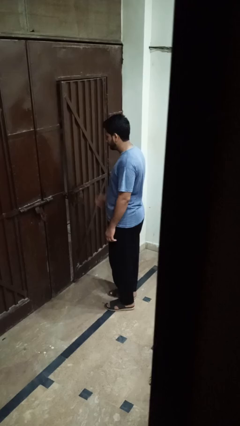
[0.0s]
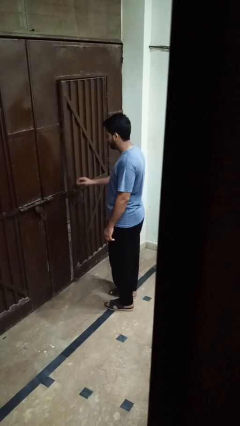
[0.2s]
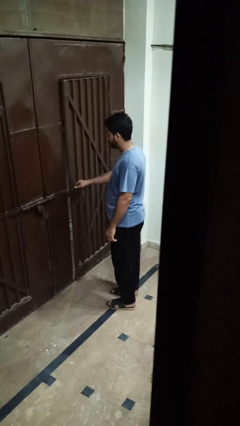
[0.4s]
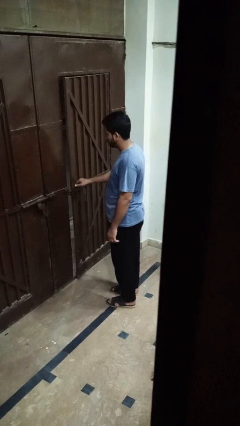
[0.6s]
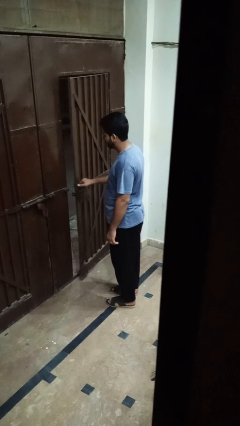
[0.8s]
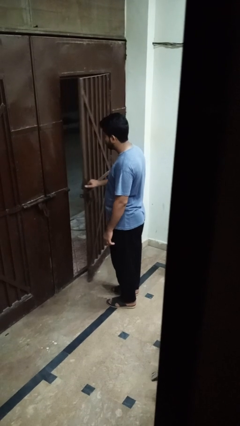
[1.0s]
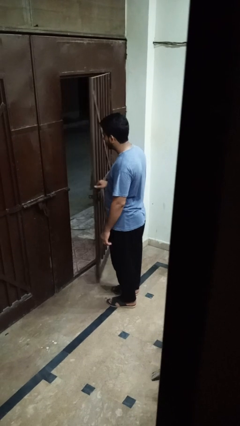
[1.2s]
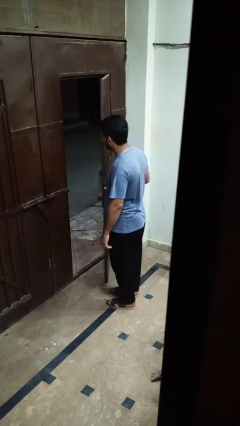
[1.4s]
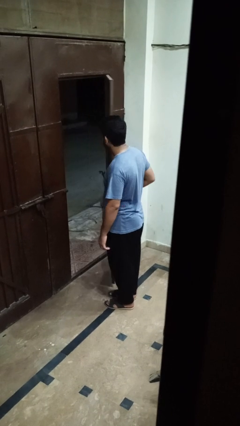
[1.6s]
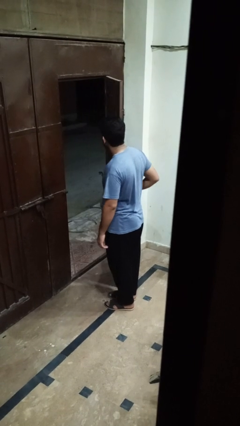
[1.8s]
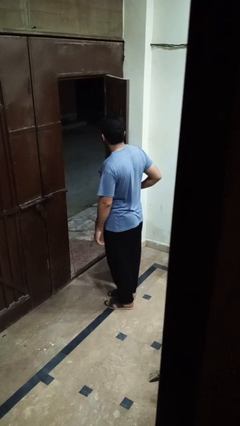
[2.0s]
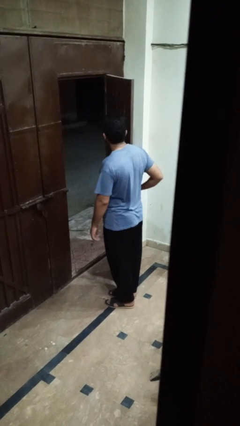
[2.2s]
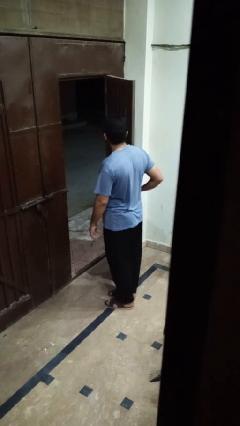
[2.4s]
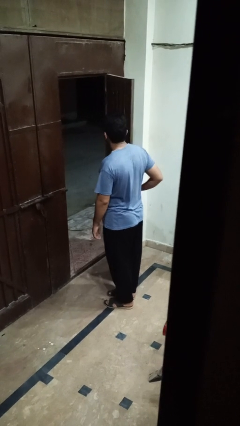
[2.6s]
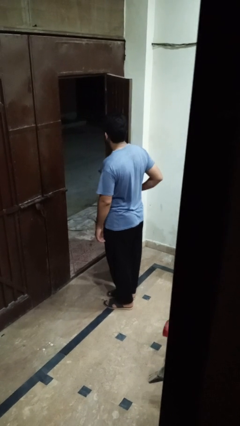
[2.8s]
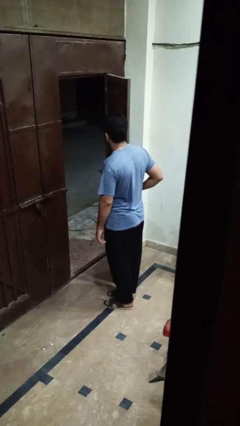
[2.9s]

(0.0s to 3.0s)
person opens gate

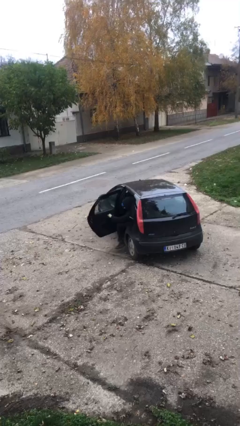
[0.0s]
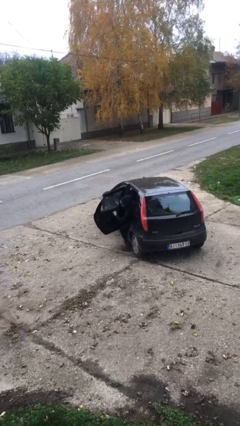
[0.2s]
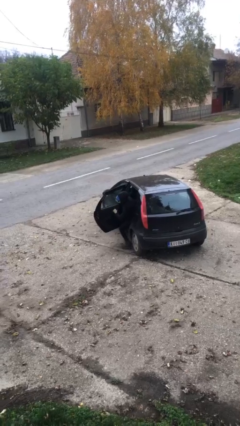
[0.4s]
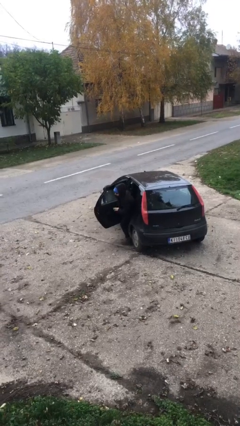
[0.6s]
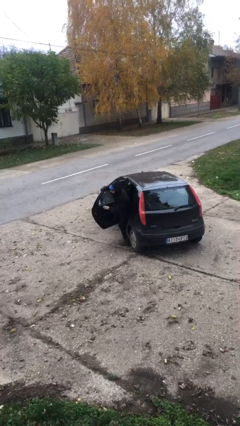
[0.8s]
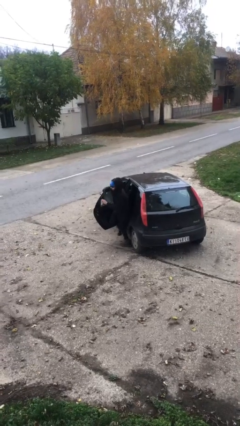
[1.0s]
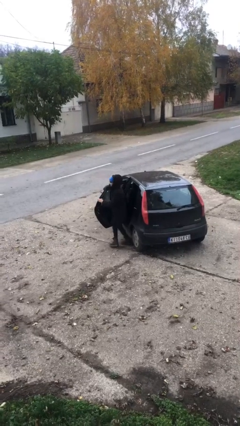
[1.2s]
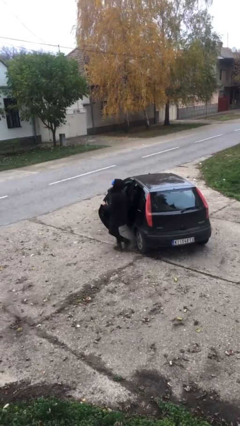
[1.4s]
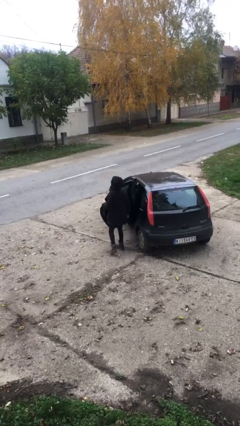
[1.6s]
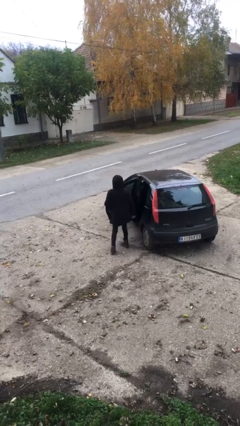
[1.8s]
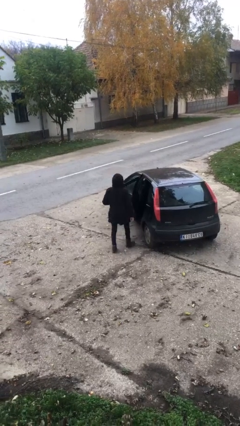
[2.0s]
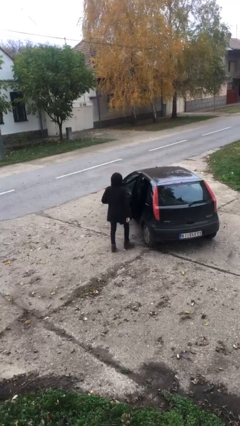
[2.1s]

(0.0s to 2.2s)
person exits car

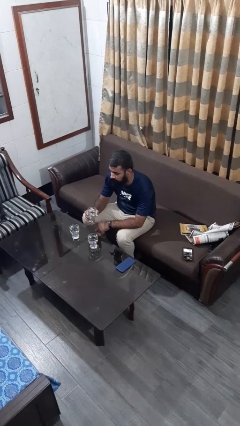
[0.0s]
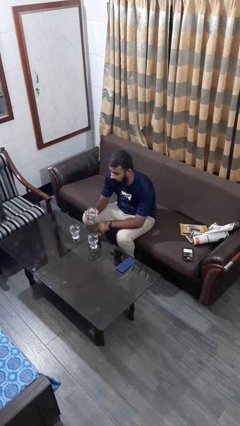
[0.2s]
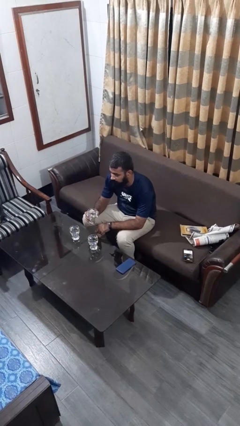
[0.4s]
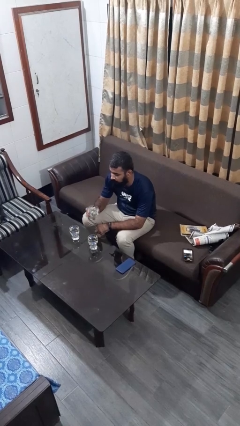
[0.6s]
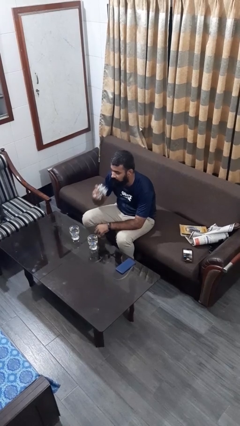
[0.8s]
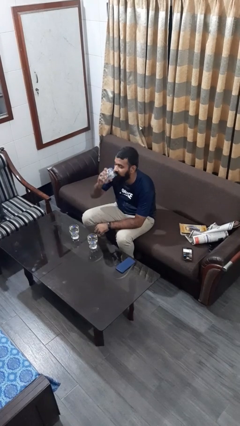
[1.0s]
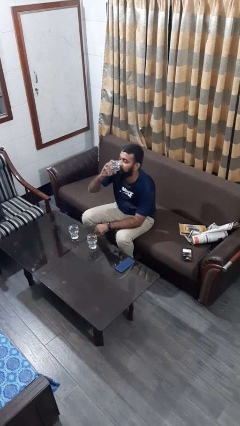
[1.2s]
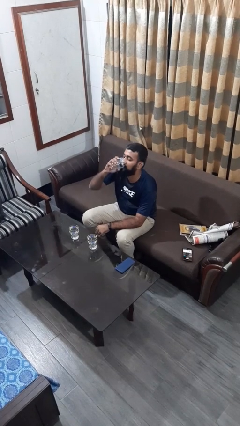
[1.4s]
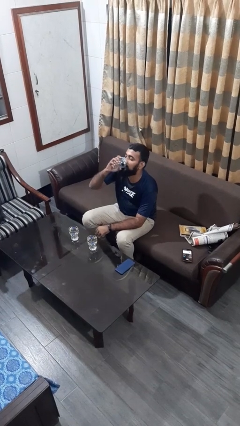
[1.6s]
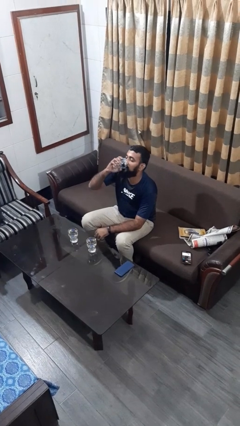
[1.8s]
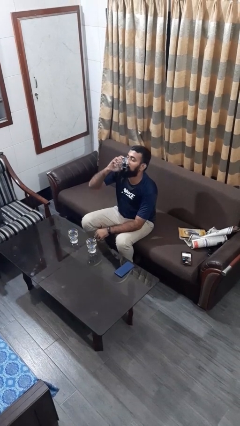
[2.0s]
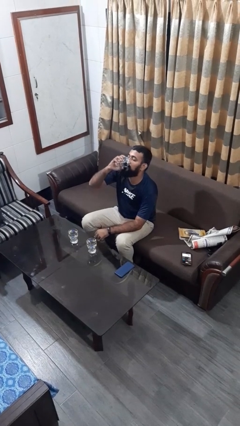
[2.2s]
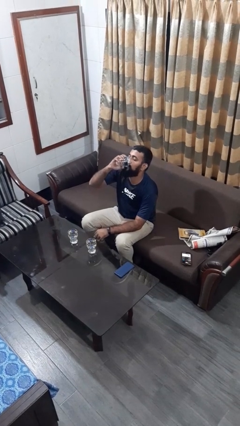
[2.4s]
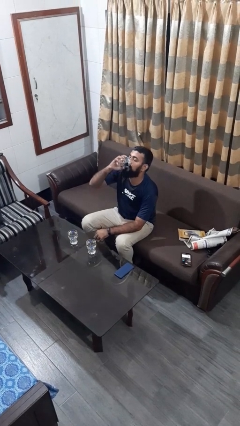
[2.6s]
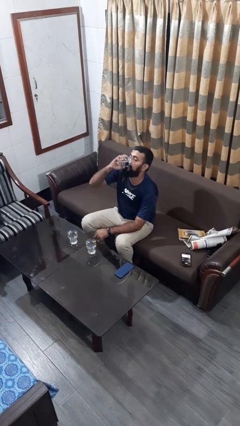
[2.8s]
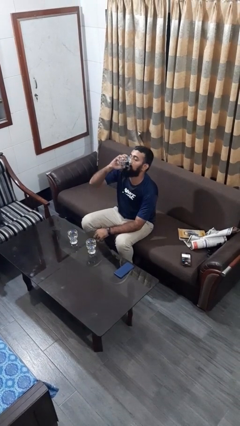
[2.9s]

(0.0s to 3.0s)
person drinks from shotglass

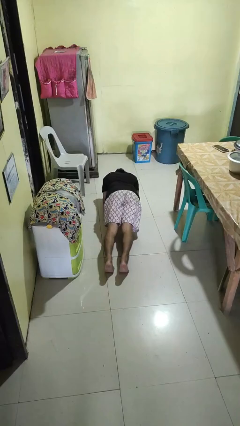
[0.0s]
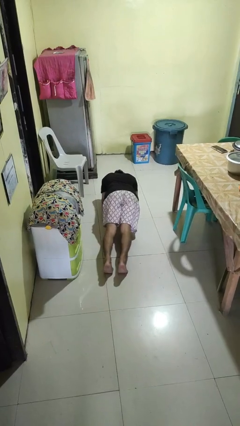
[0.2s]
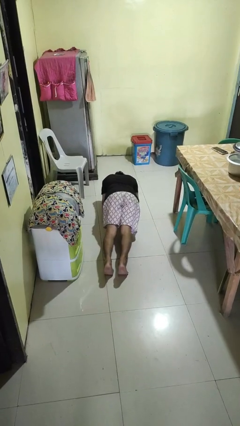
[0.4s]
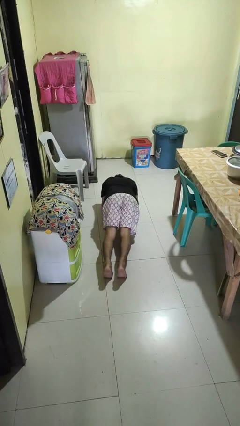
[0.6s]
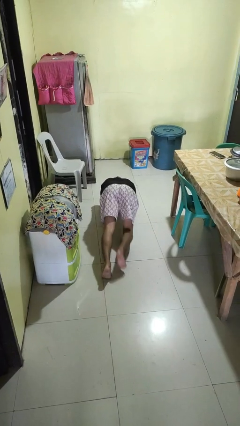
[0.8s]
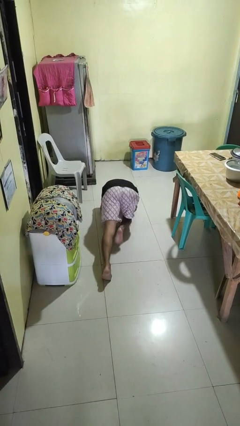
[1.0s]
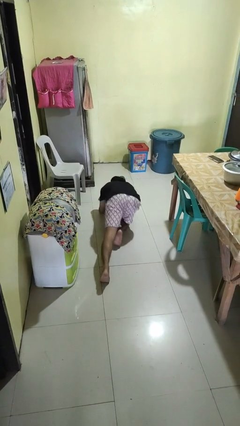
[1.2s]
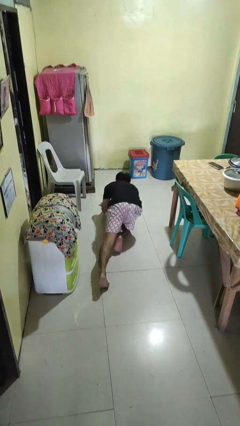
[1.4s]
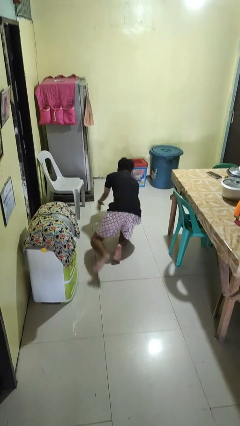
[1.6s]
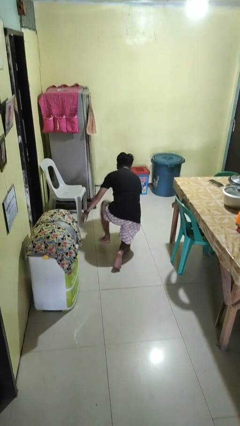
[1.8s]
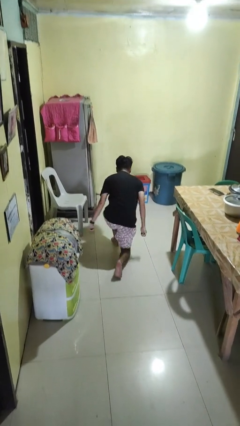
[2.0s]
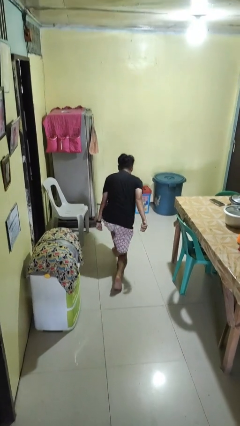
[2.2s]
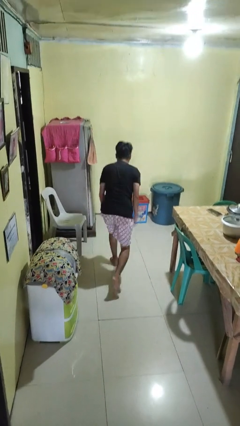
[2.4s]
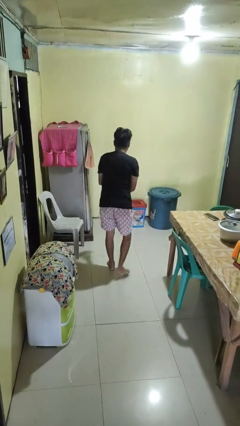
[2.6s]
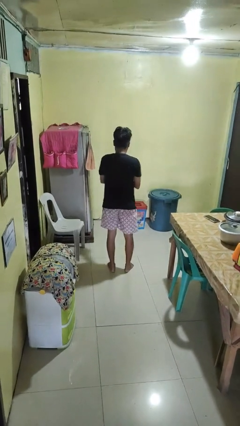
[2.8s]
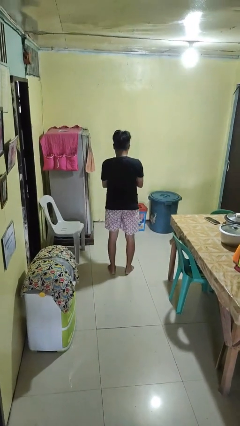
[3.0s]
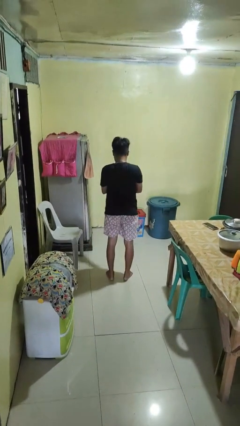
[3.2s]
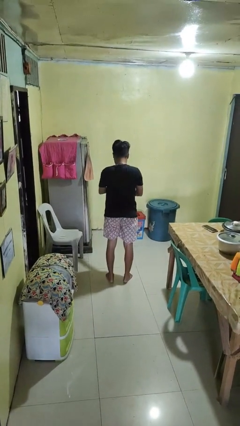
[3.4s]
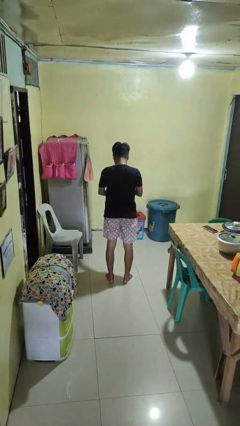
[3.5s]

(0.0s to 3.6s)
person stands up from floor

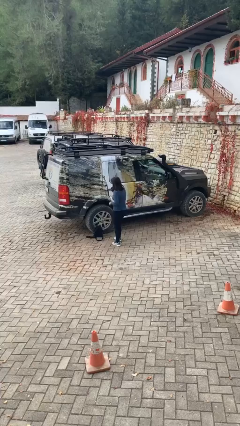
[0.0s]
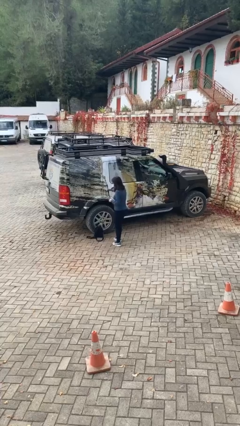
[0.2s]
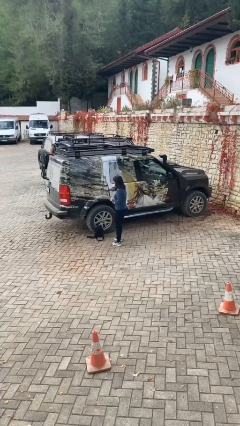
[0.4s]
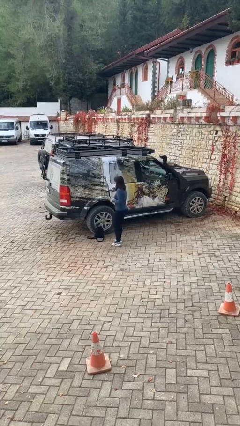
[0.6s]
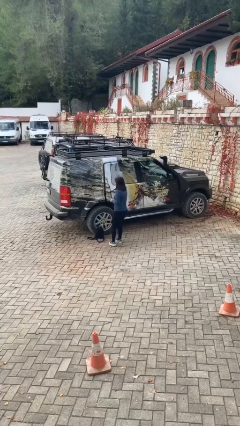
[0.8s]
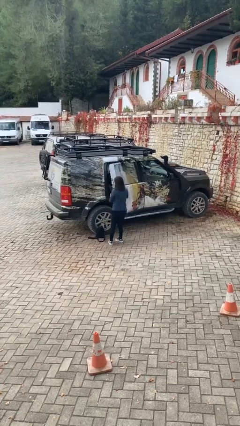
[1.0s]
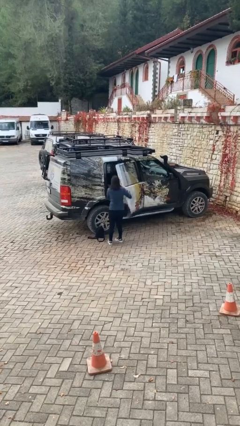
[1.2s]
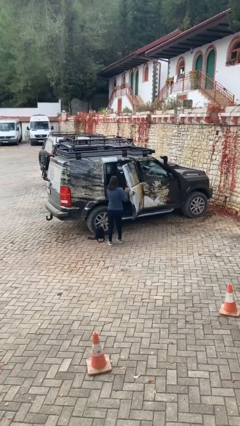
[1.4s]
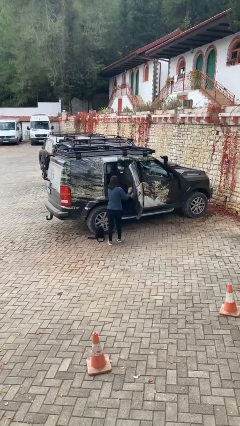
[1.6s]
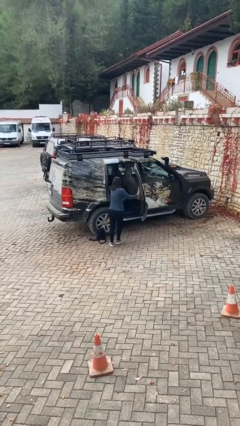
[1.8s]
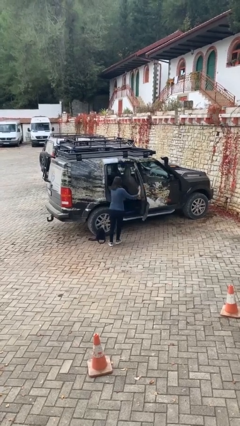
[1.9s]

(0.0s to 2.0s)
person opens car door

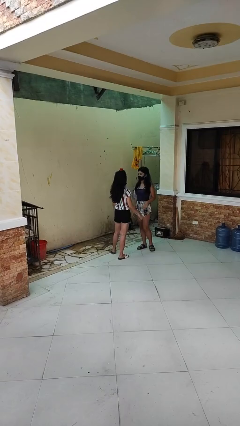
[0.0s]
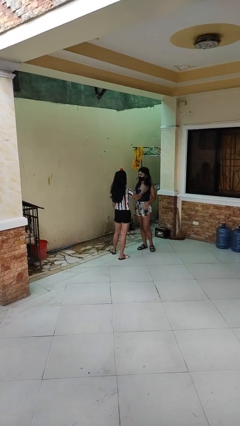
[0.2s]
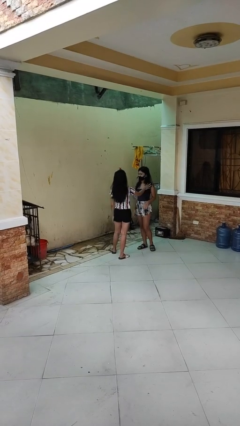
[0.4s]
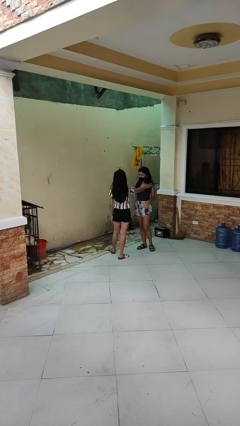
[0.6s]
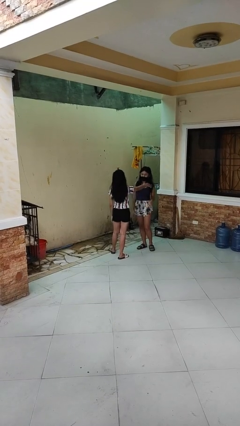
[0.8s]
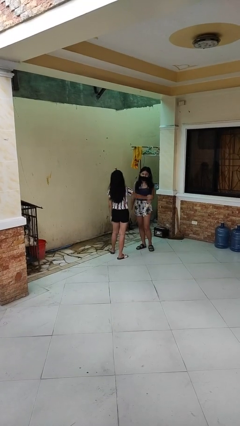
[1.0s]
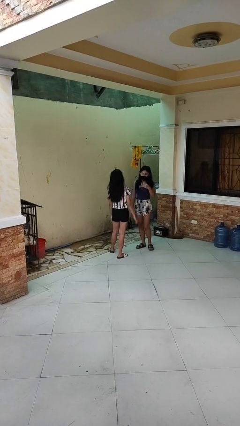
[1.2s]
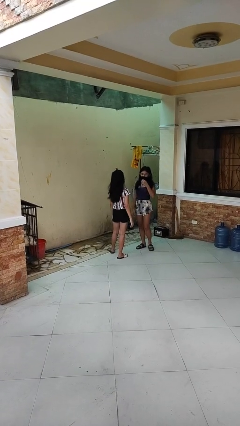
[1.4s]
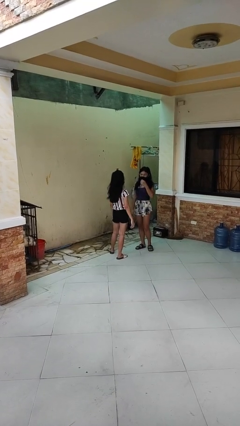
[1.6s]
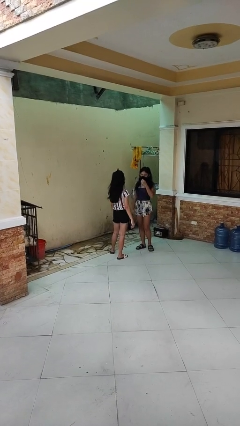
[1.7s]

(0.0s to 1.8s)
person shoves person

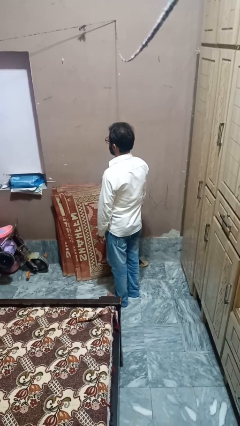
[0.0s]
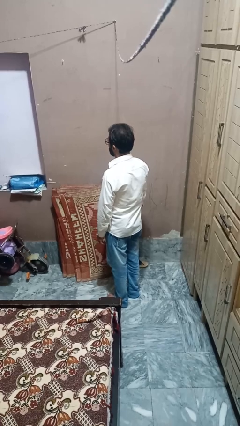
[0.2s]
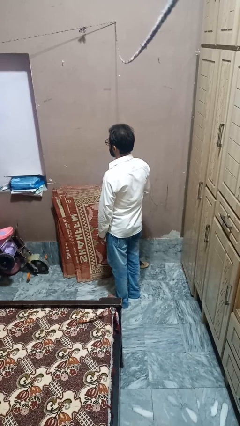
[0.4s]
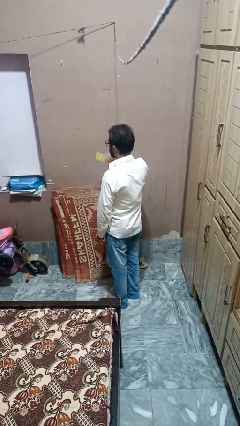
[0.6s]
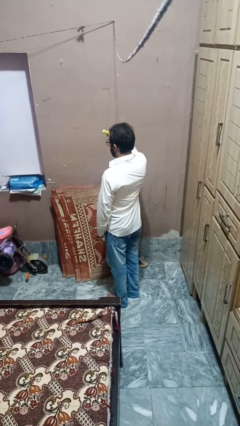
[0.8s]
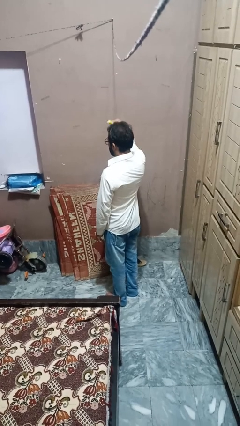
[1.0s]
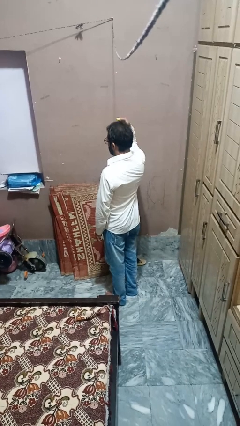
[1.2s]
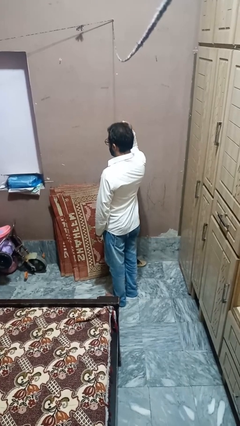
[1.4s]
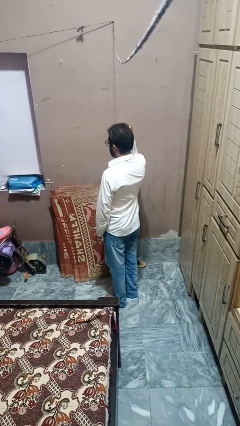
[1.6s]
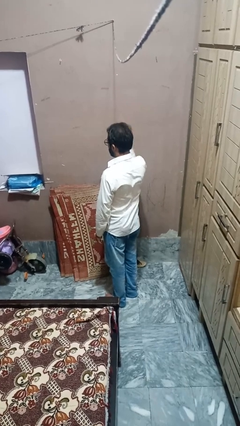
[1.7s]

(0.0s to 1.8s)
person brushes hair
